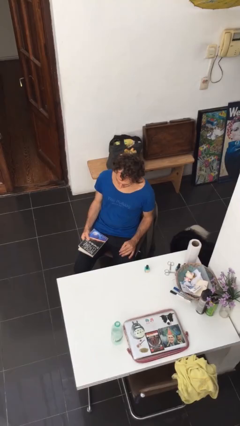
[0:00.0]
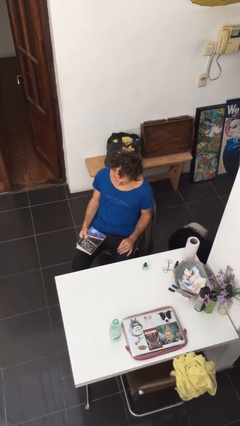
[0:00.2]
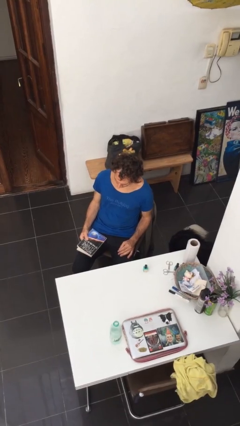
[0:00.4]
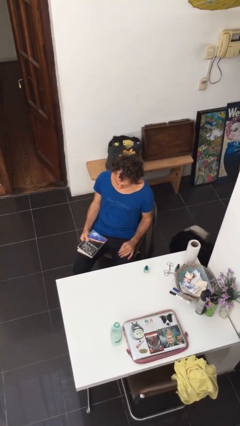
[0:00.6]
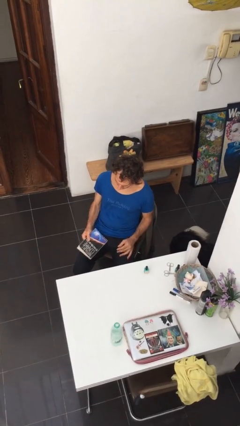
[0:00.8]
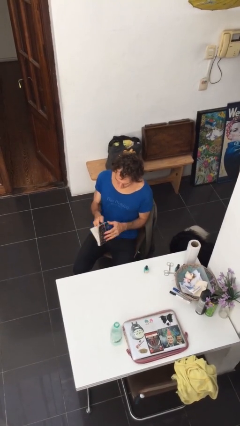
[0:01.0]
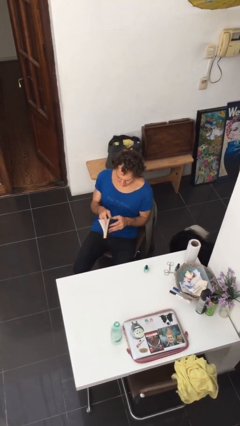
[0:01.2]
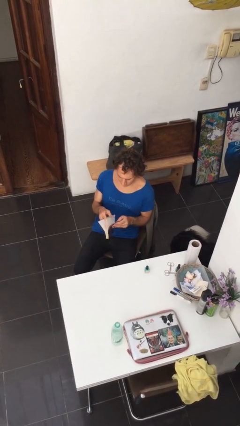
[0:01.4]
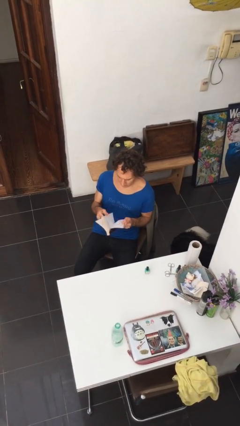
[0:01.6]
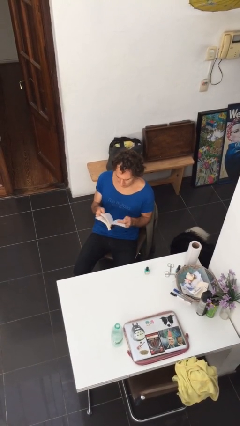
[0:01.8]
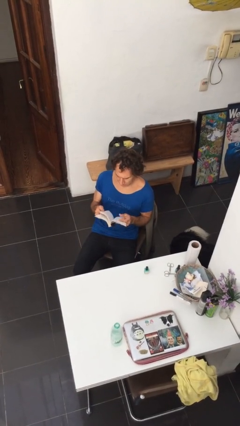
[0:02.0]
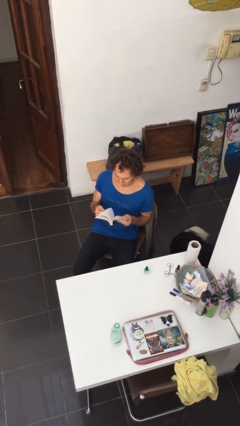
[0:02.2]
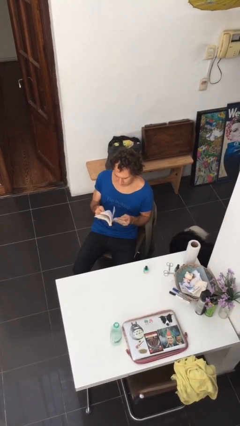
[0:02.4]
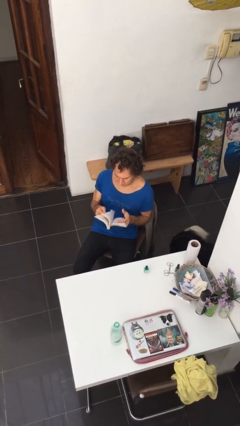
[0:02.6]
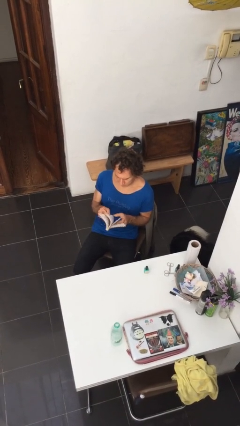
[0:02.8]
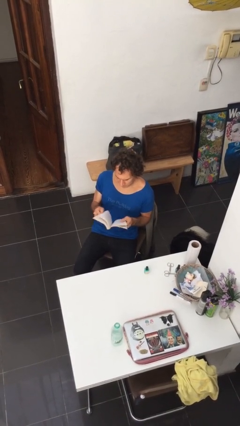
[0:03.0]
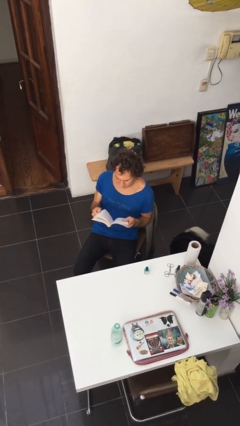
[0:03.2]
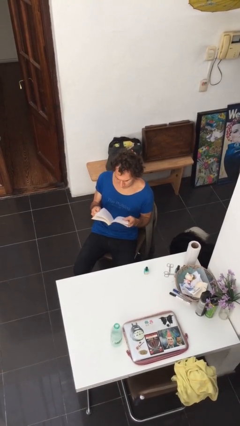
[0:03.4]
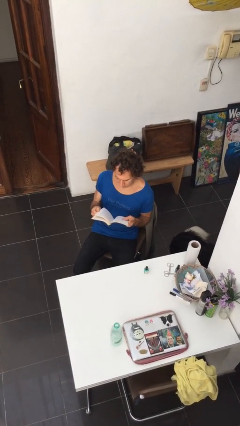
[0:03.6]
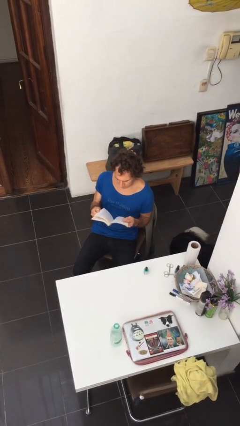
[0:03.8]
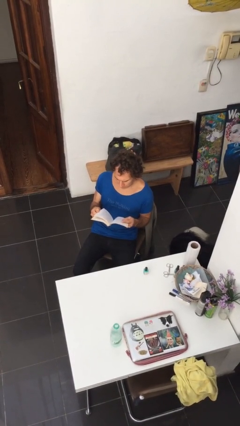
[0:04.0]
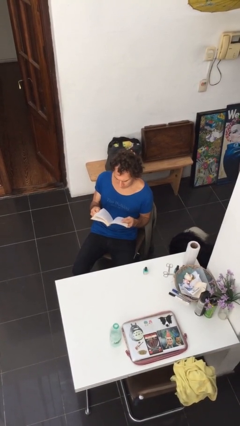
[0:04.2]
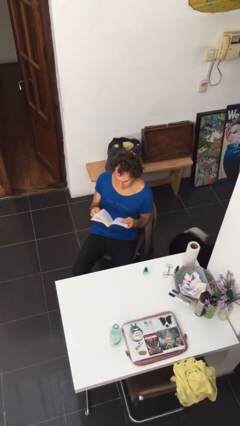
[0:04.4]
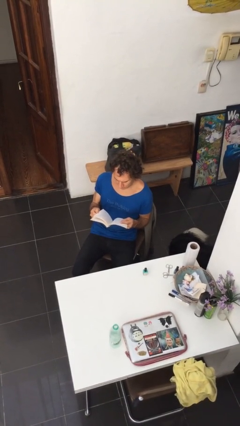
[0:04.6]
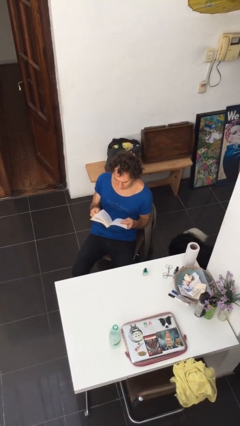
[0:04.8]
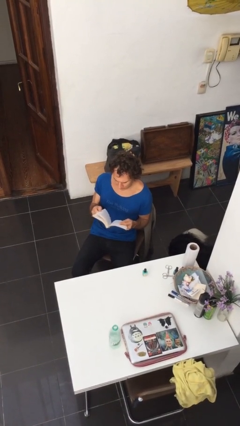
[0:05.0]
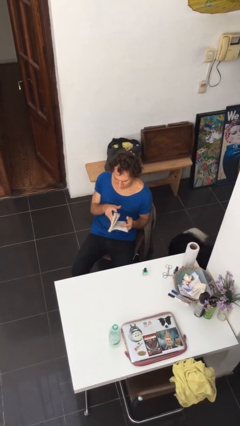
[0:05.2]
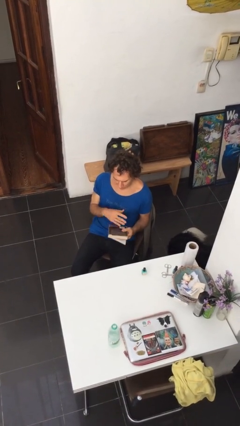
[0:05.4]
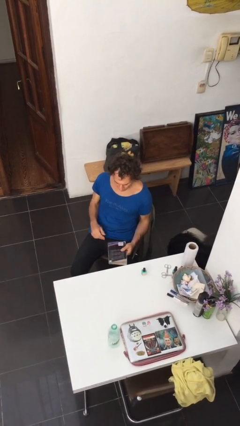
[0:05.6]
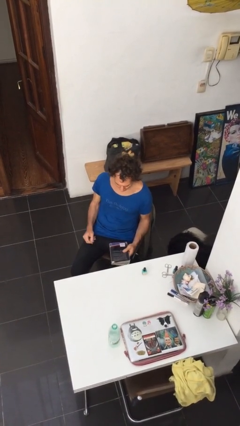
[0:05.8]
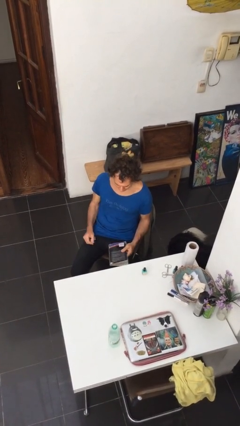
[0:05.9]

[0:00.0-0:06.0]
person reads document

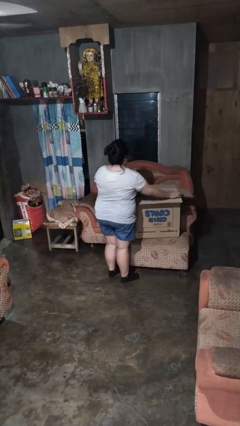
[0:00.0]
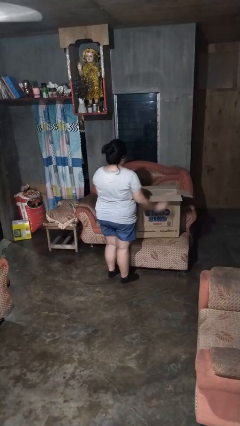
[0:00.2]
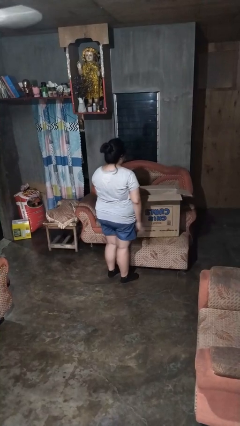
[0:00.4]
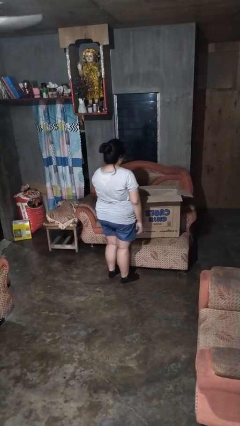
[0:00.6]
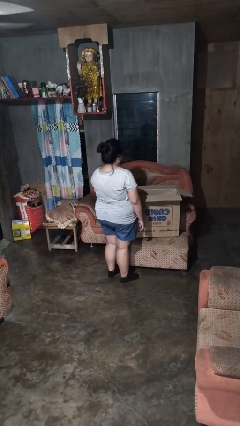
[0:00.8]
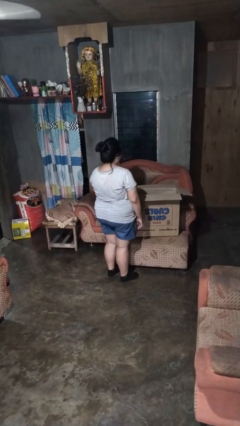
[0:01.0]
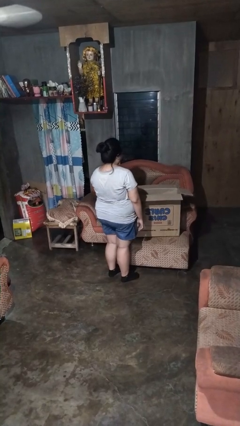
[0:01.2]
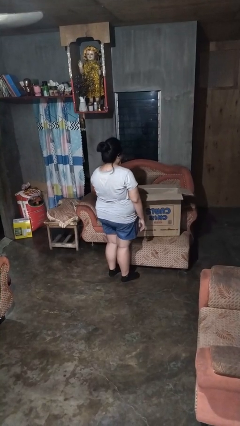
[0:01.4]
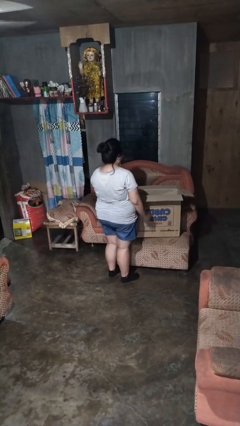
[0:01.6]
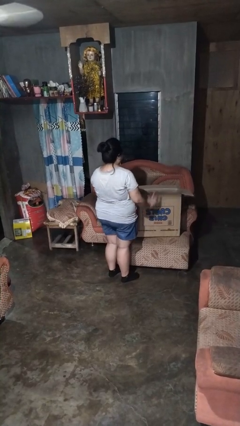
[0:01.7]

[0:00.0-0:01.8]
person closes box

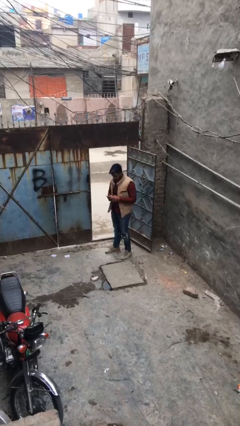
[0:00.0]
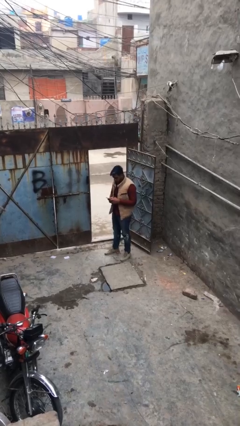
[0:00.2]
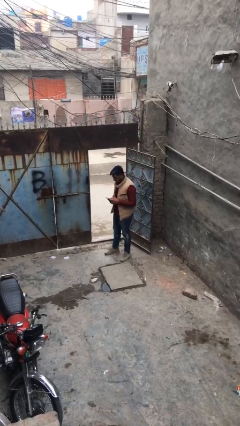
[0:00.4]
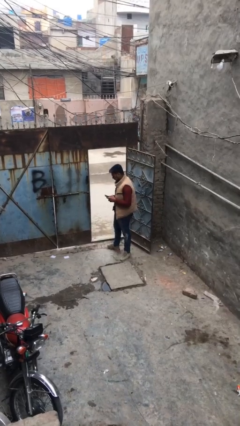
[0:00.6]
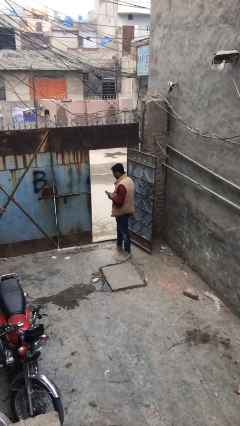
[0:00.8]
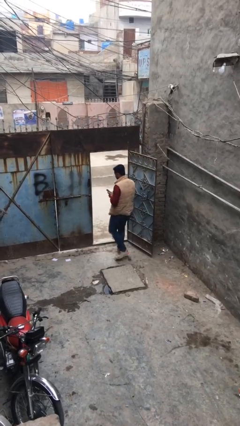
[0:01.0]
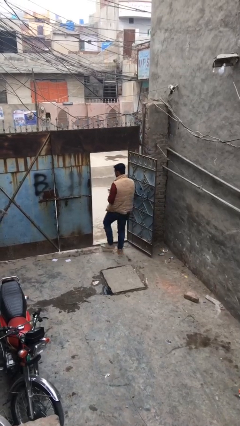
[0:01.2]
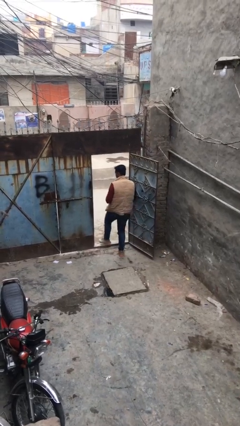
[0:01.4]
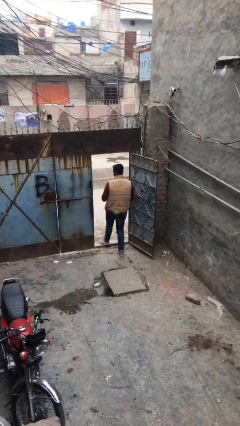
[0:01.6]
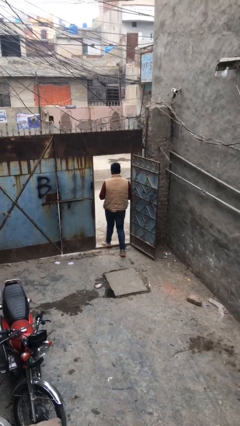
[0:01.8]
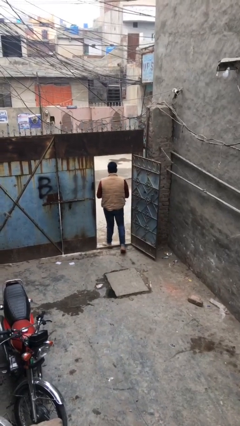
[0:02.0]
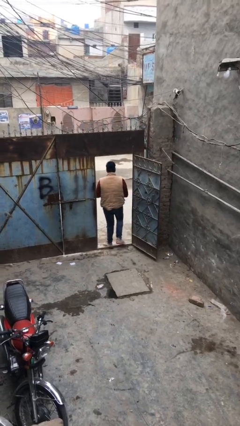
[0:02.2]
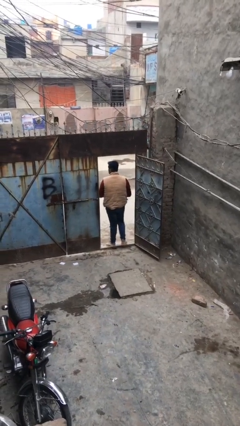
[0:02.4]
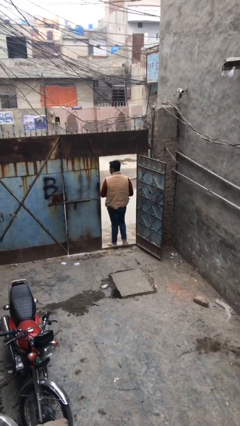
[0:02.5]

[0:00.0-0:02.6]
person exits scene through structure

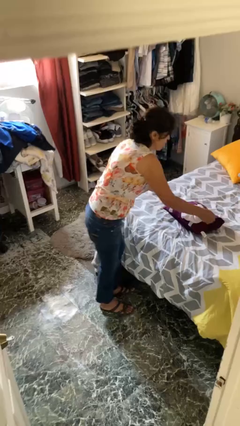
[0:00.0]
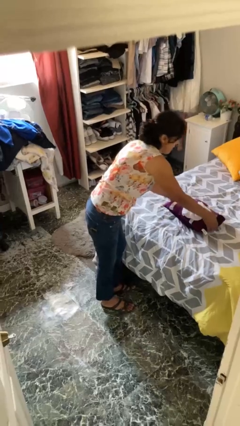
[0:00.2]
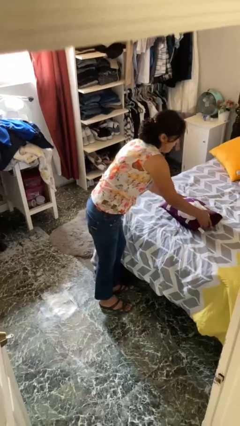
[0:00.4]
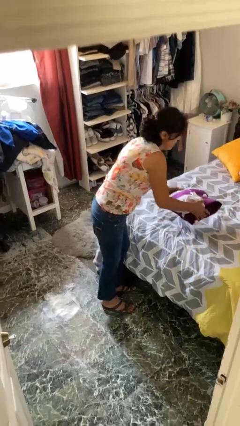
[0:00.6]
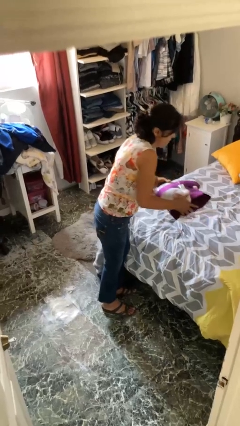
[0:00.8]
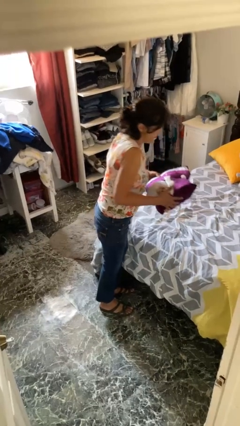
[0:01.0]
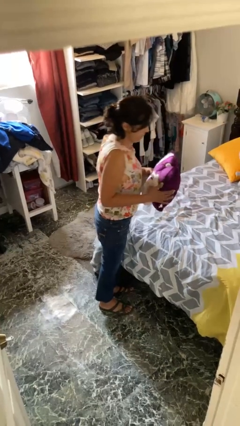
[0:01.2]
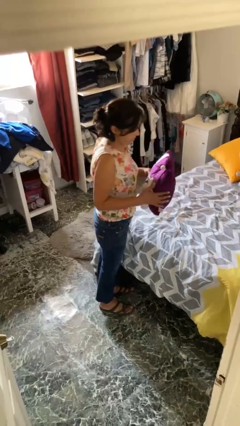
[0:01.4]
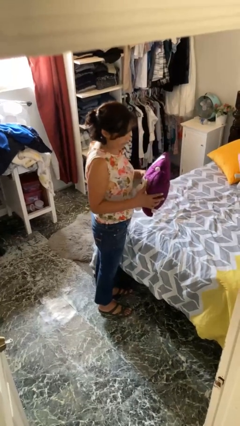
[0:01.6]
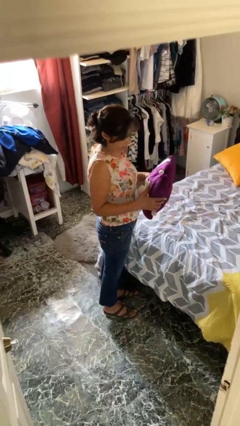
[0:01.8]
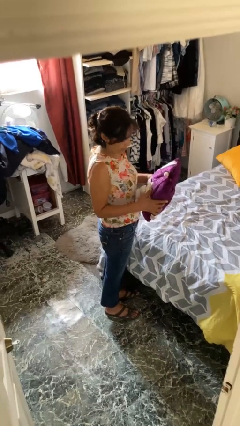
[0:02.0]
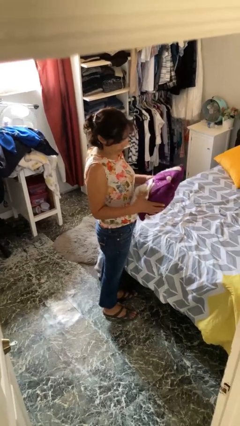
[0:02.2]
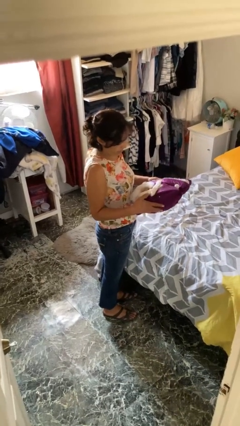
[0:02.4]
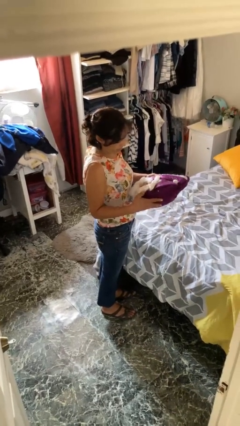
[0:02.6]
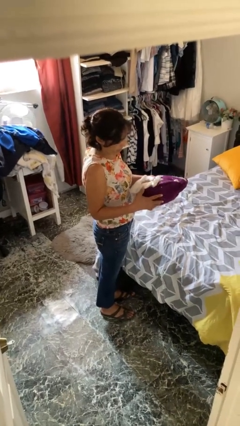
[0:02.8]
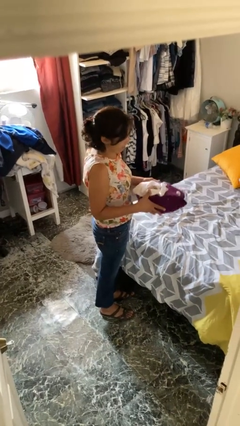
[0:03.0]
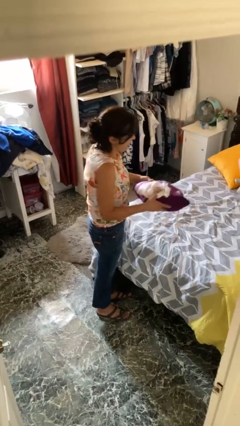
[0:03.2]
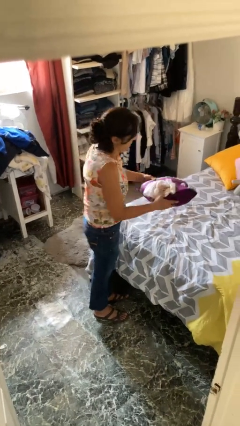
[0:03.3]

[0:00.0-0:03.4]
person picks up object from bed

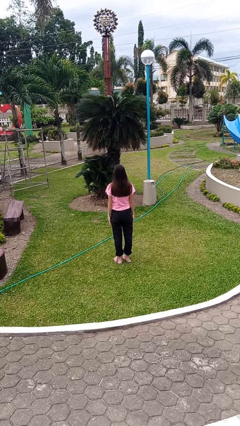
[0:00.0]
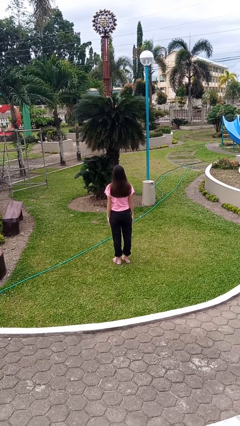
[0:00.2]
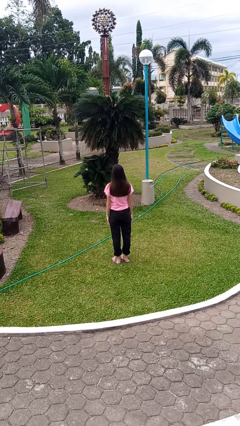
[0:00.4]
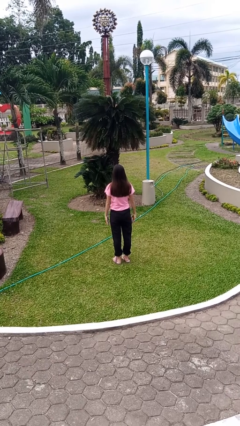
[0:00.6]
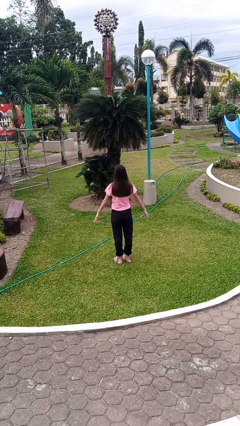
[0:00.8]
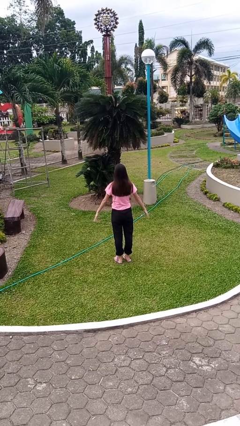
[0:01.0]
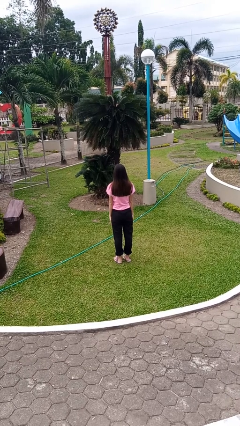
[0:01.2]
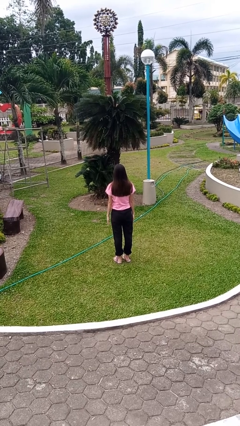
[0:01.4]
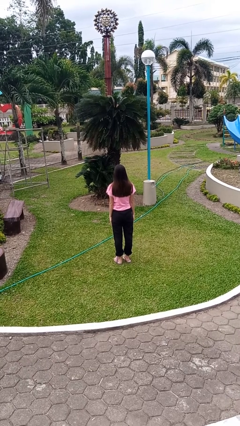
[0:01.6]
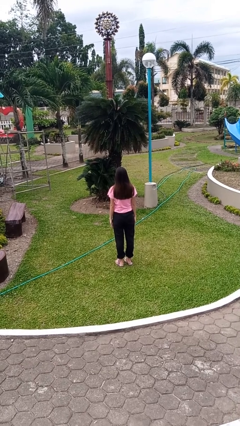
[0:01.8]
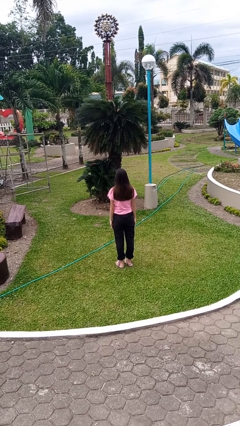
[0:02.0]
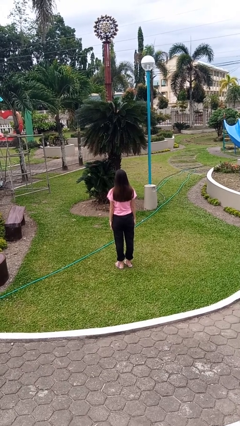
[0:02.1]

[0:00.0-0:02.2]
person slaps hands on thighs

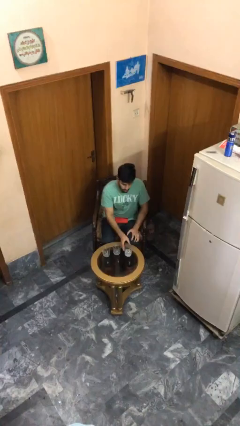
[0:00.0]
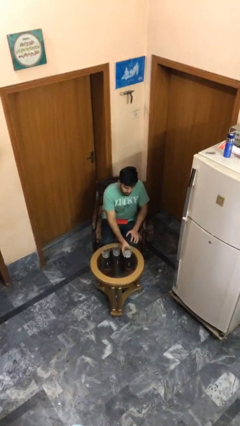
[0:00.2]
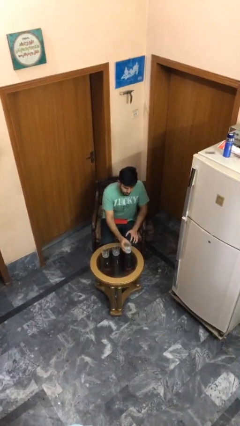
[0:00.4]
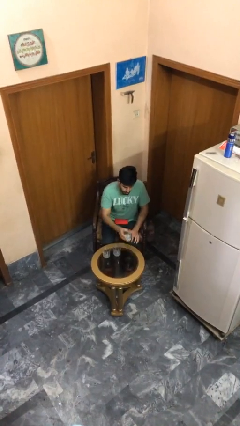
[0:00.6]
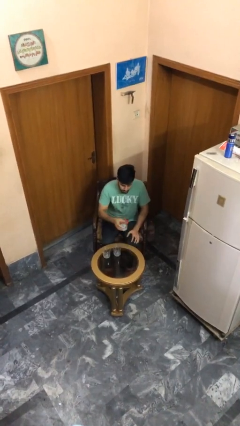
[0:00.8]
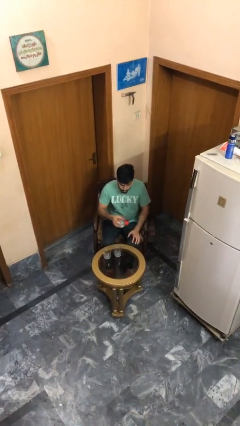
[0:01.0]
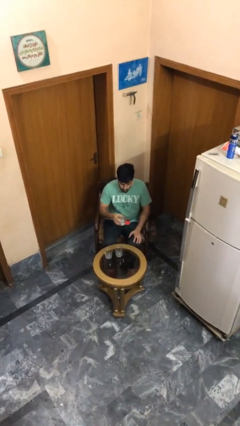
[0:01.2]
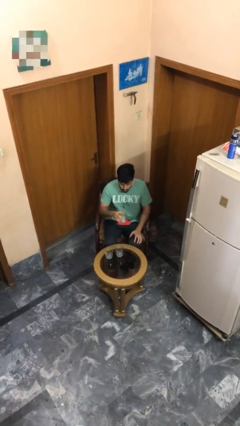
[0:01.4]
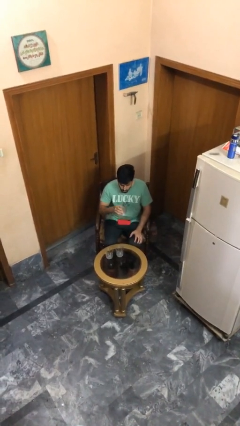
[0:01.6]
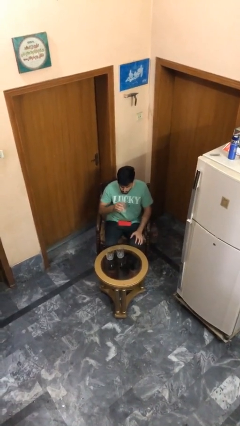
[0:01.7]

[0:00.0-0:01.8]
person picks up object from table
